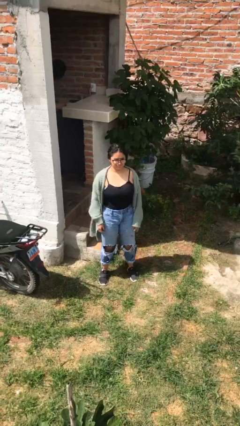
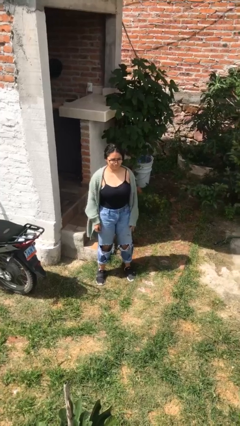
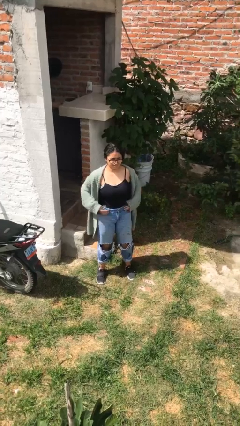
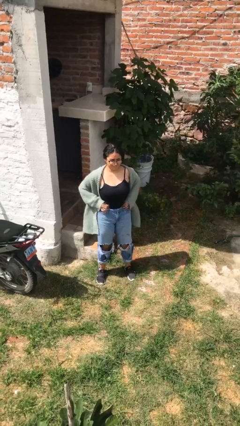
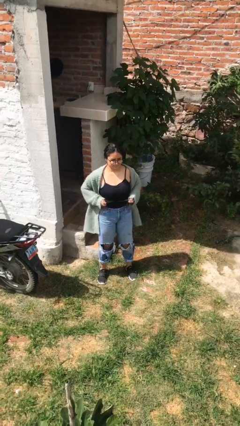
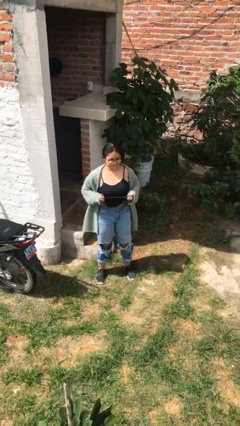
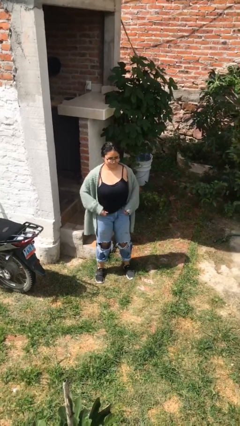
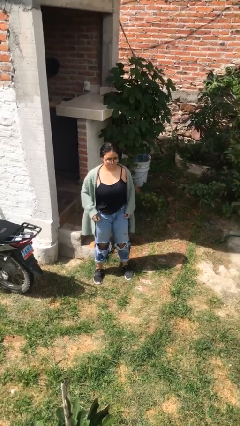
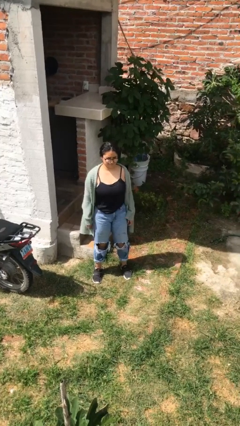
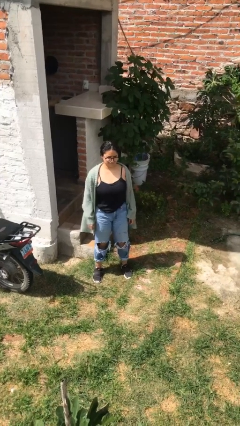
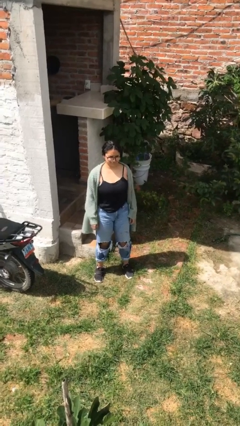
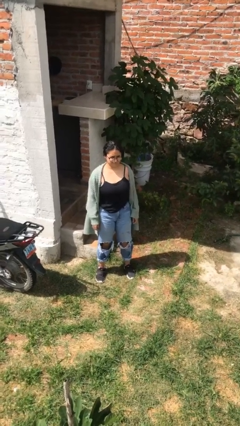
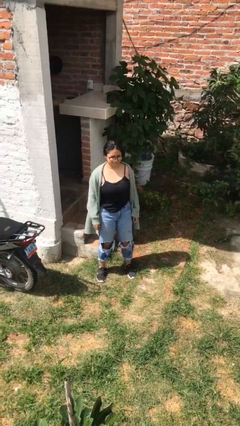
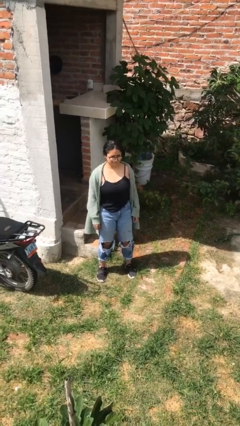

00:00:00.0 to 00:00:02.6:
person untucks shirt

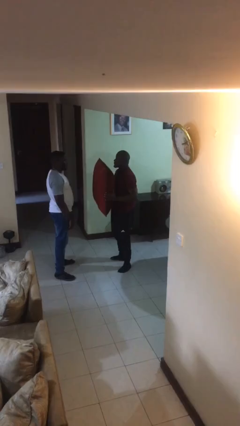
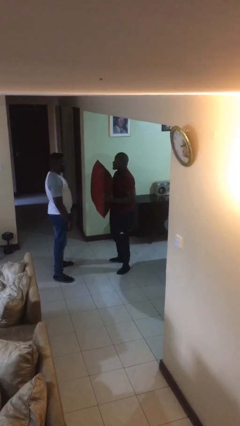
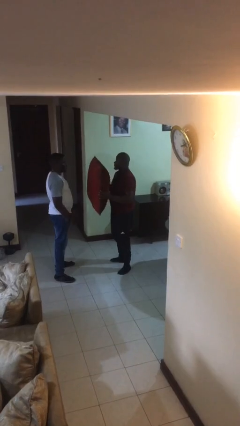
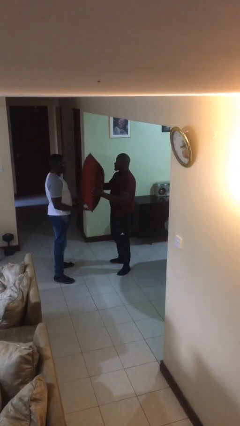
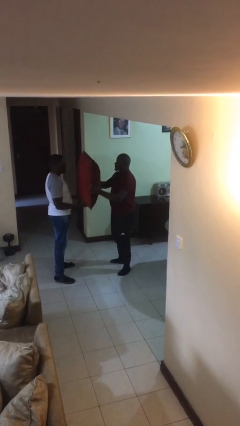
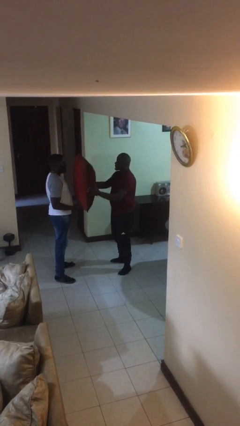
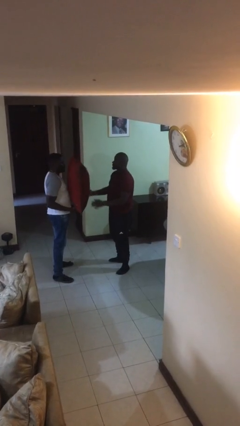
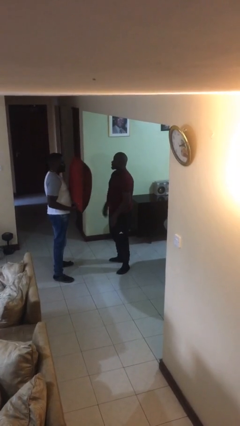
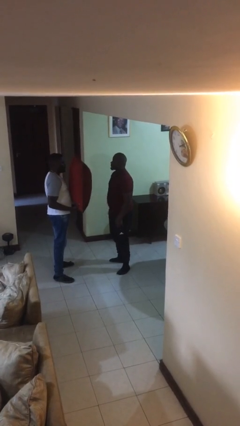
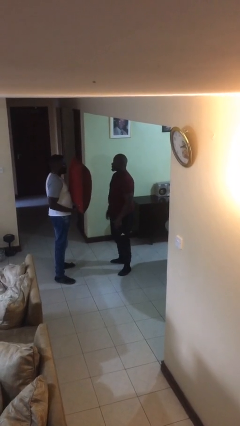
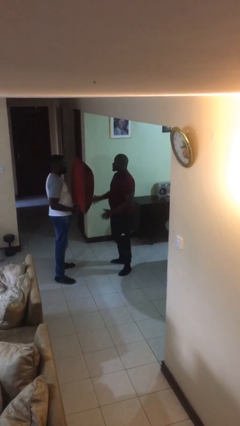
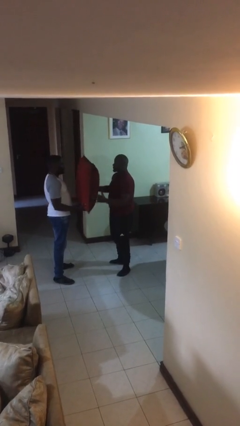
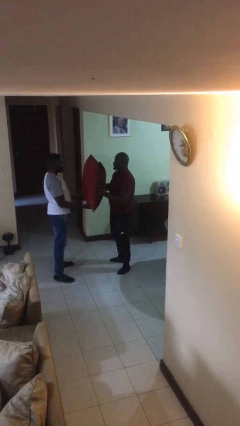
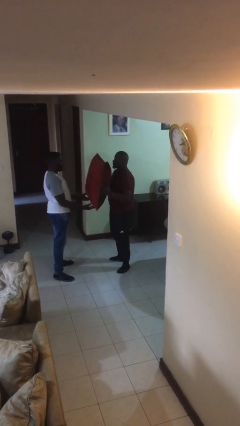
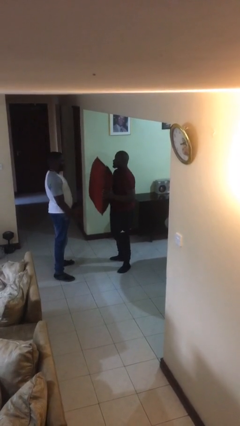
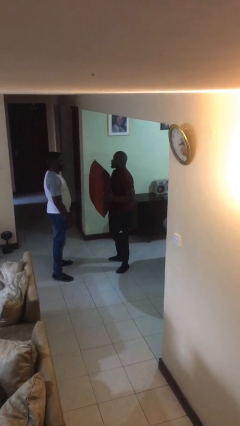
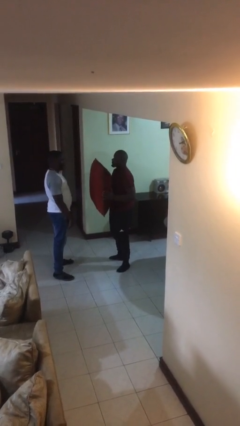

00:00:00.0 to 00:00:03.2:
person transfers object to person

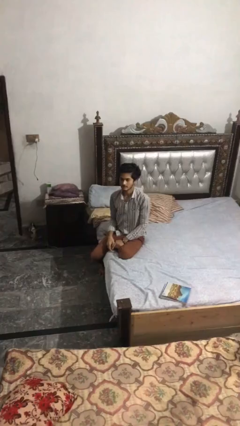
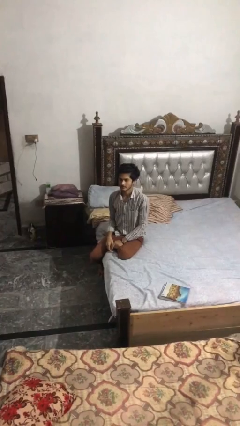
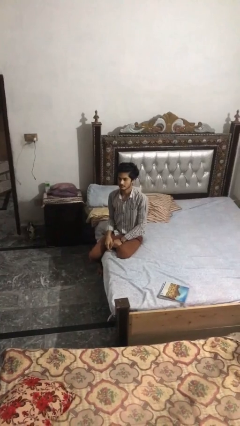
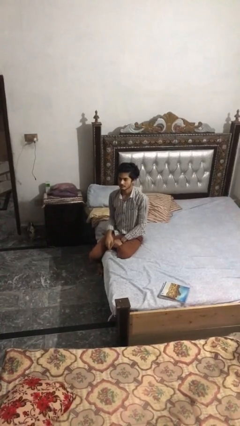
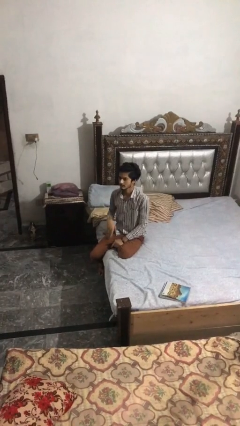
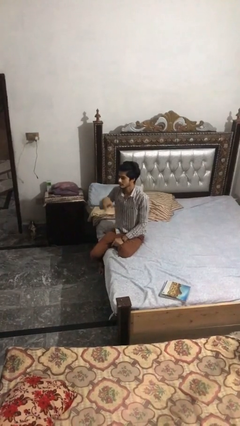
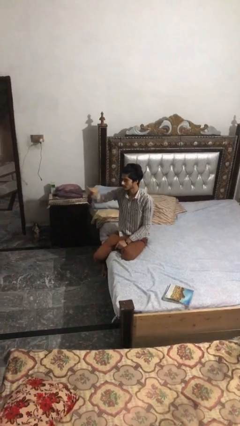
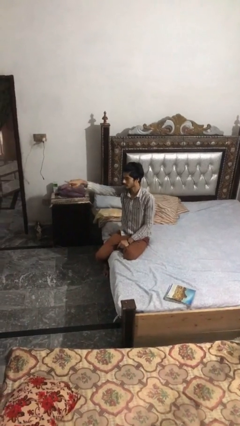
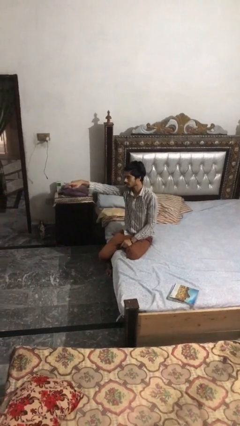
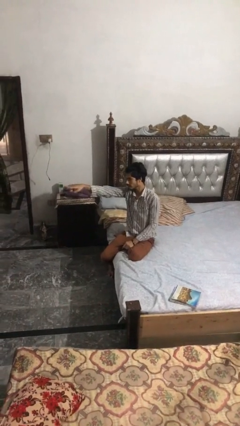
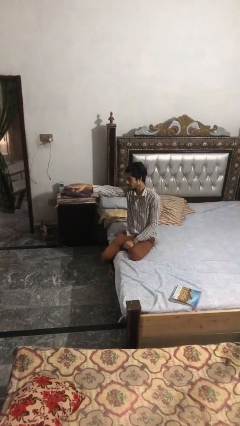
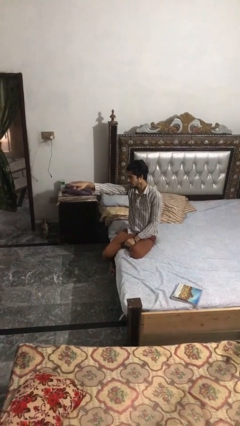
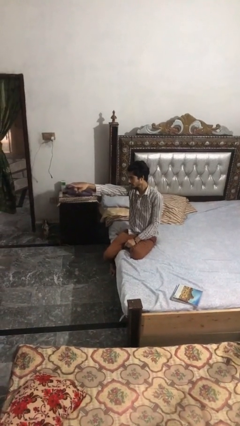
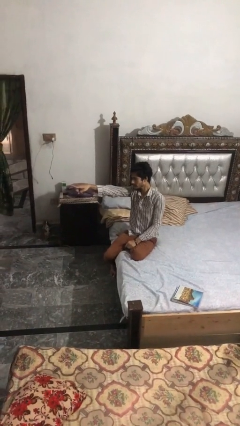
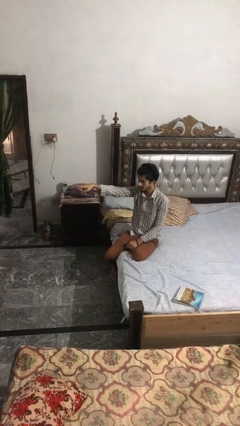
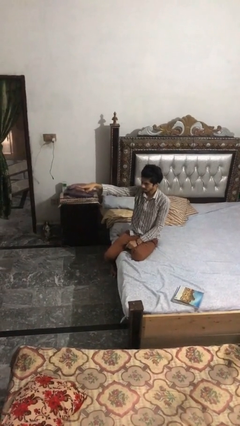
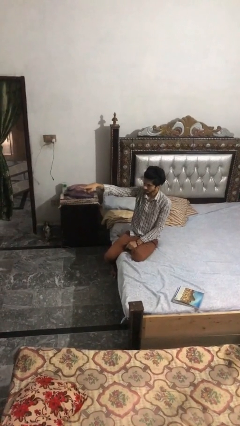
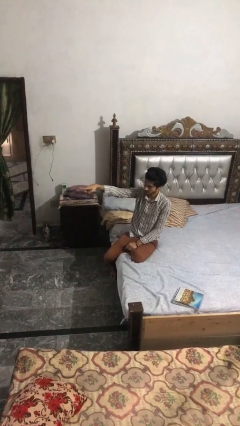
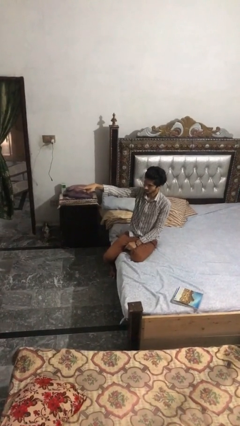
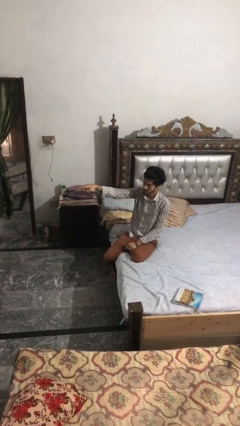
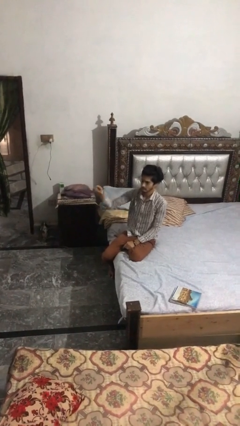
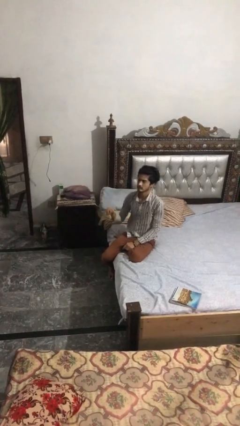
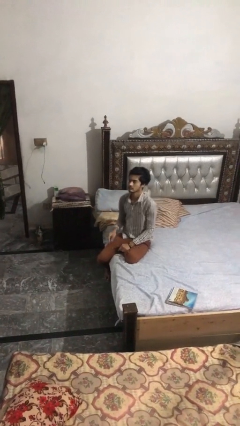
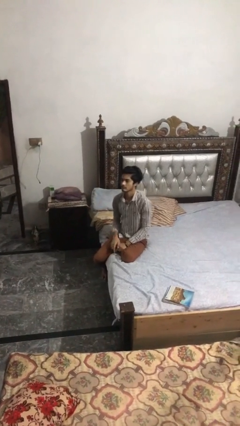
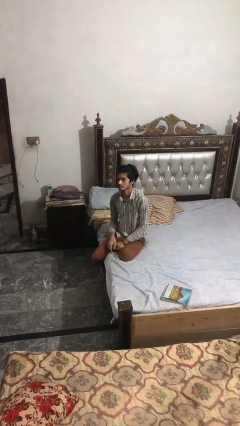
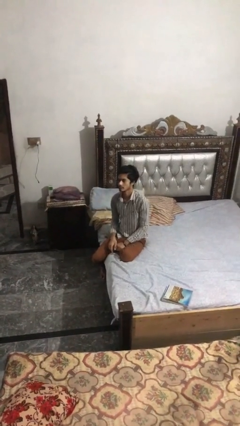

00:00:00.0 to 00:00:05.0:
person points at person

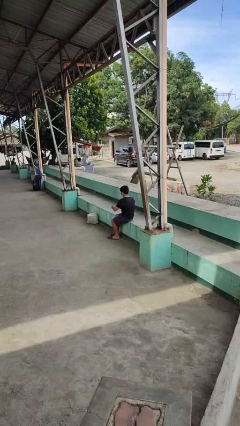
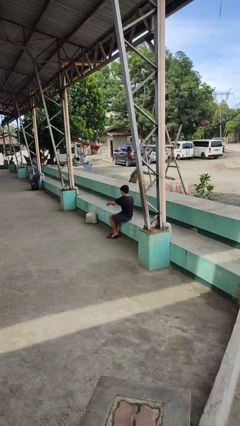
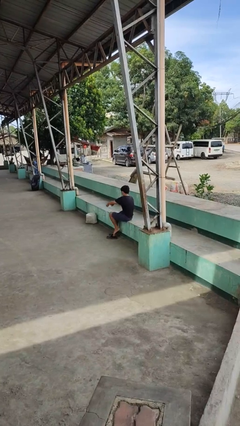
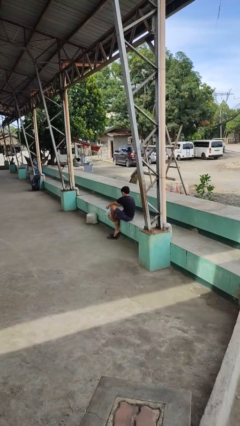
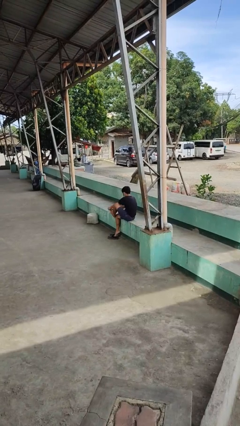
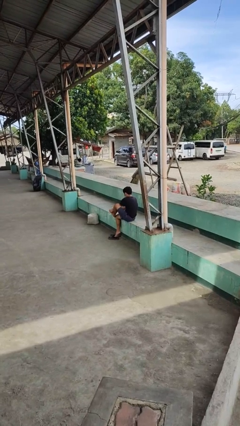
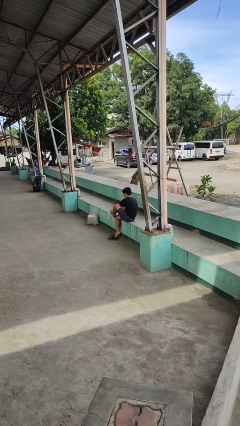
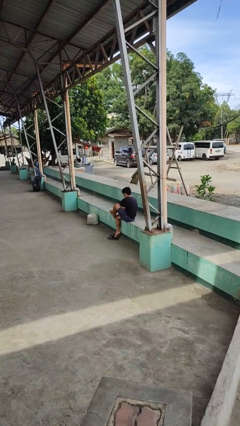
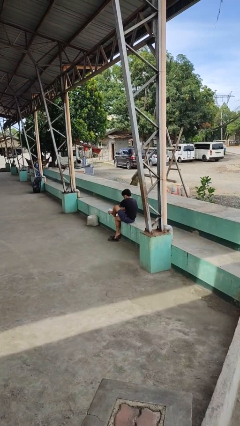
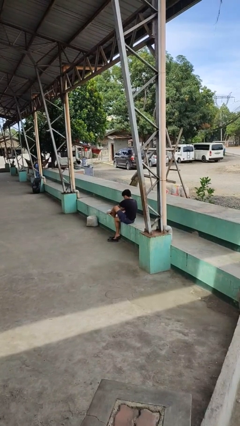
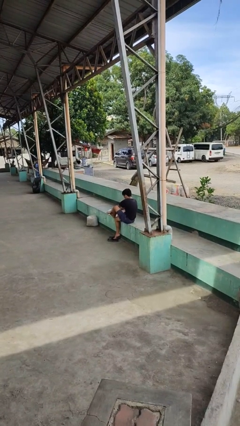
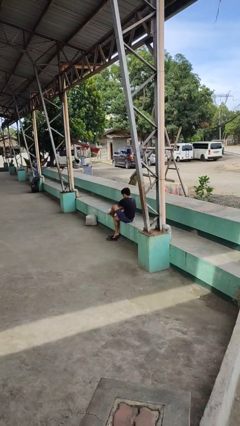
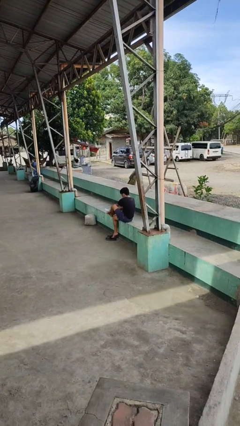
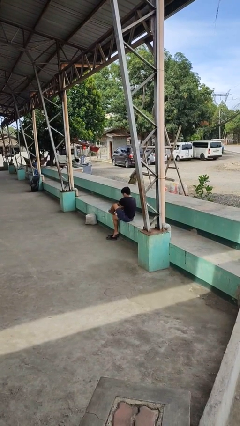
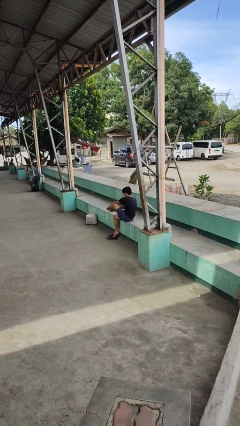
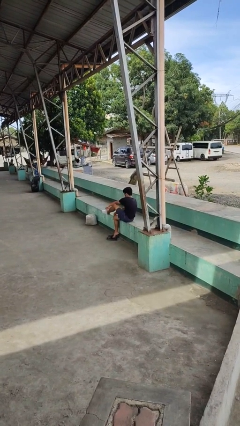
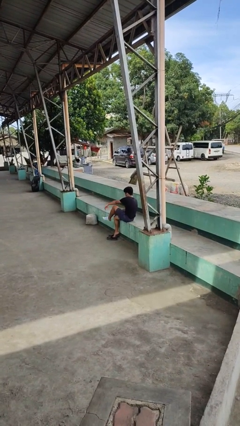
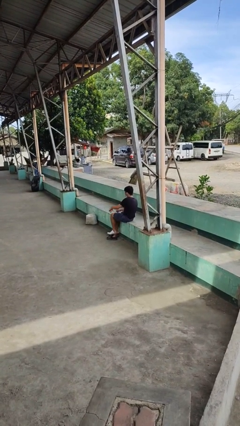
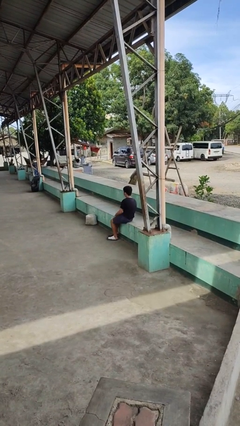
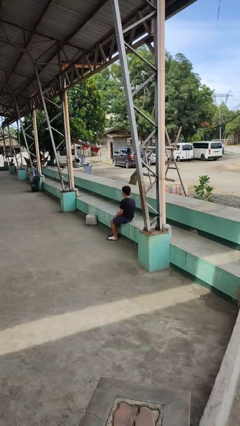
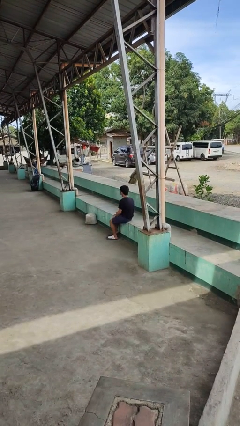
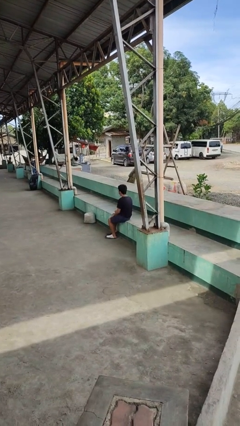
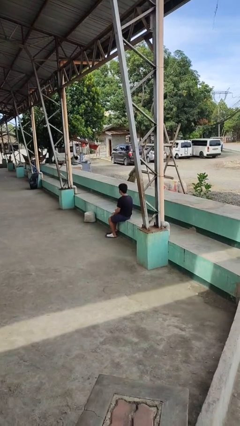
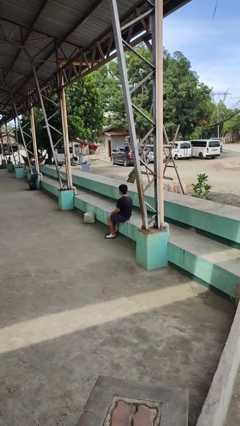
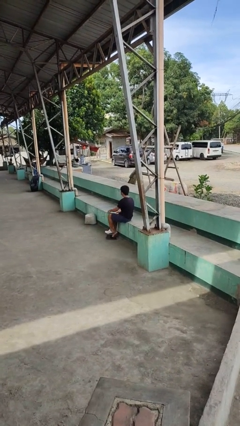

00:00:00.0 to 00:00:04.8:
person puts on socks

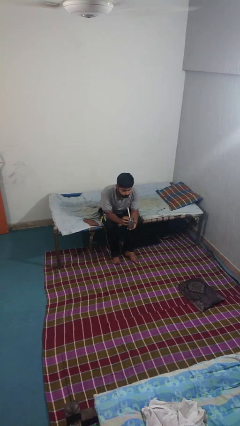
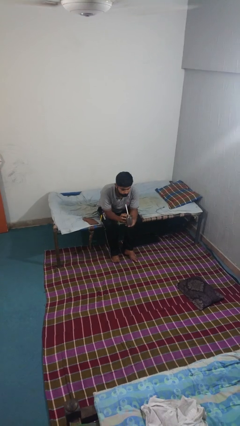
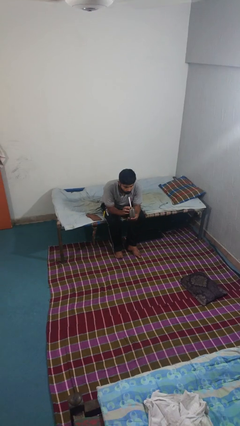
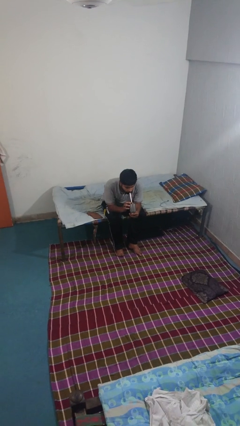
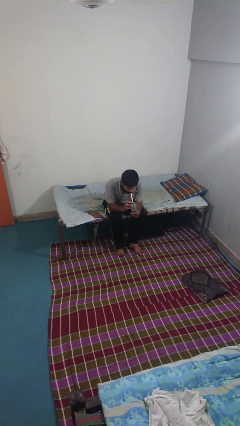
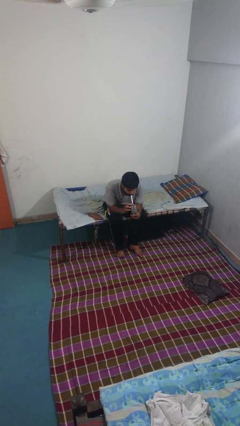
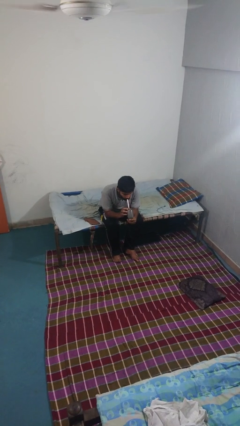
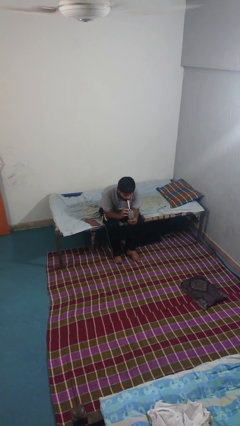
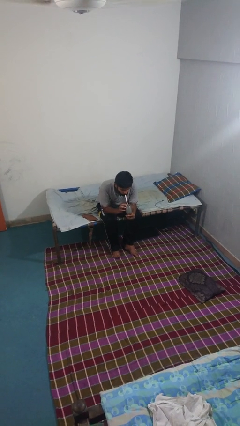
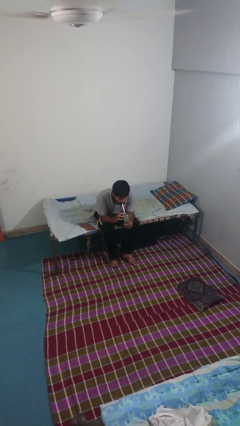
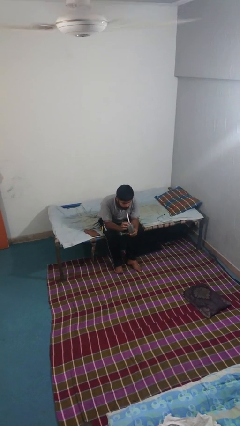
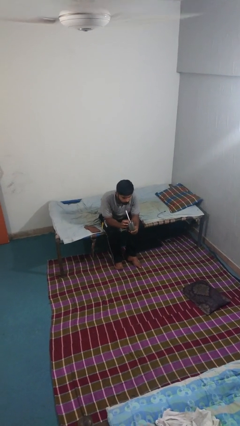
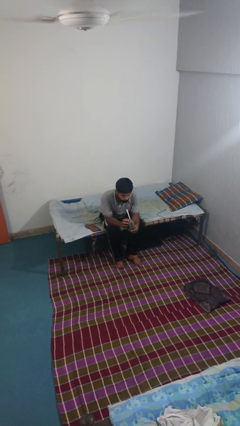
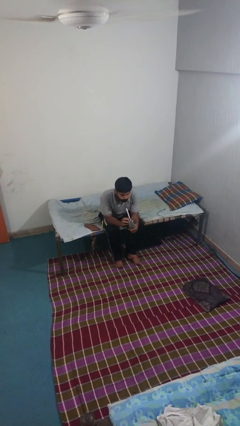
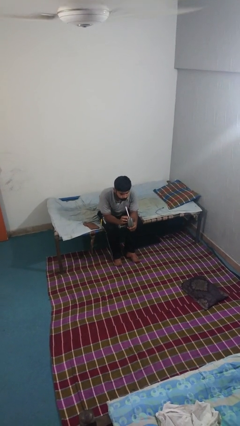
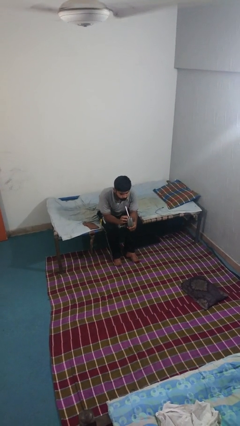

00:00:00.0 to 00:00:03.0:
person drinks from straw
